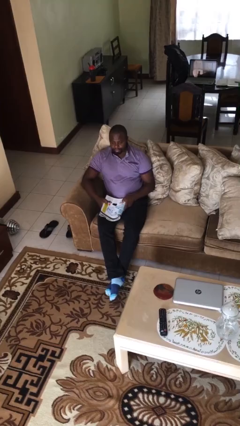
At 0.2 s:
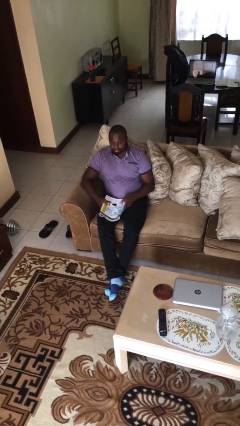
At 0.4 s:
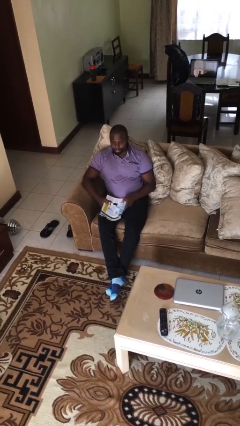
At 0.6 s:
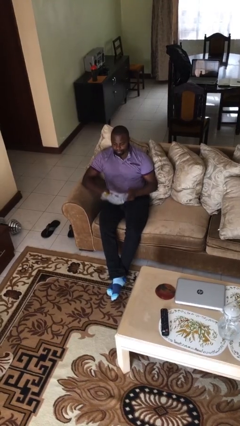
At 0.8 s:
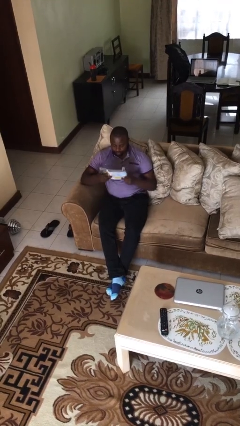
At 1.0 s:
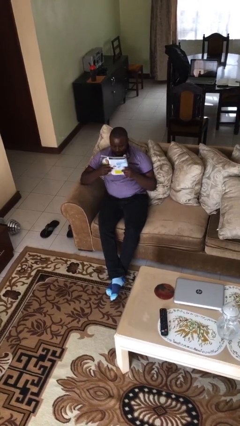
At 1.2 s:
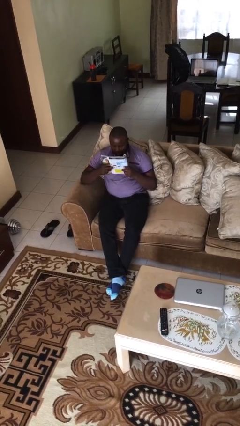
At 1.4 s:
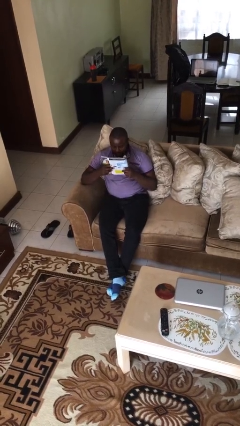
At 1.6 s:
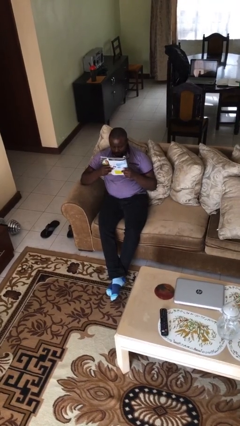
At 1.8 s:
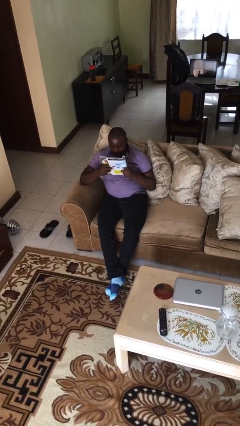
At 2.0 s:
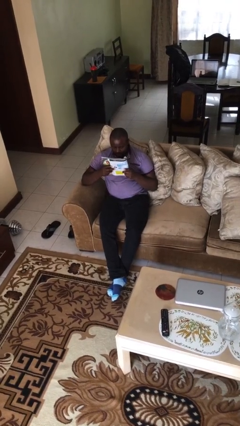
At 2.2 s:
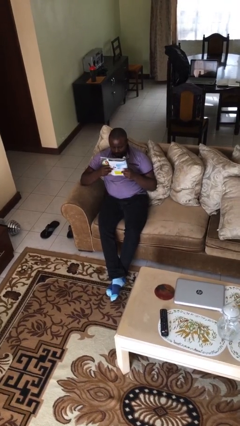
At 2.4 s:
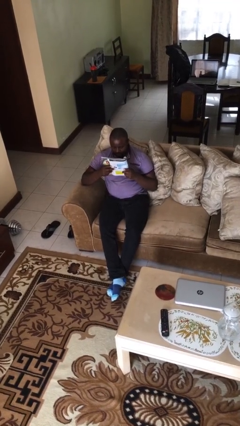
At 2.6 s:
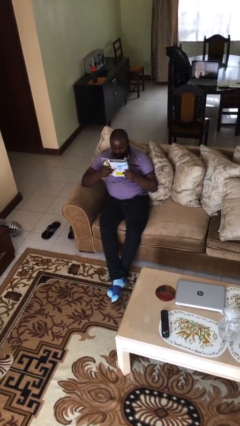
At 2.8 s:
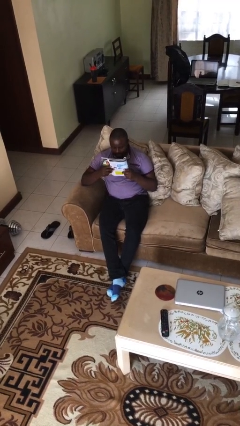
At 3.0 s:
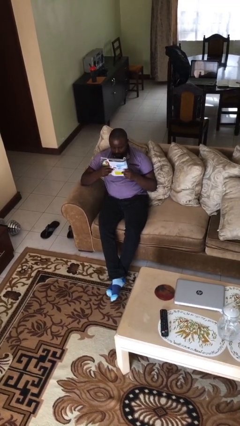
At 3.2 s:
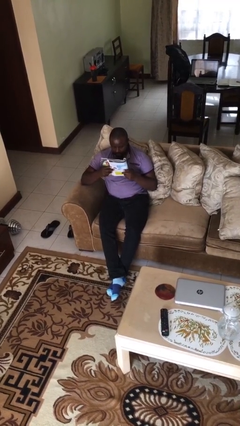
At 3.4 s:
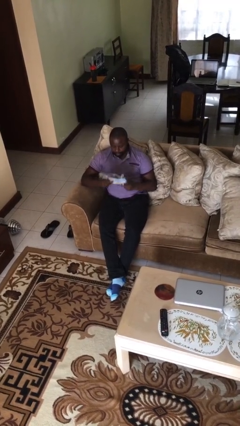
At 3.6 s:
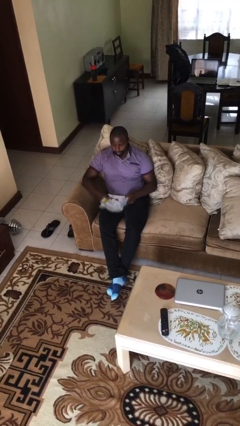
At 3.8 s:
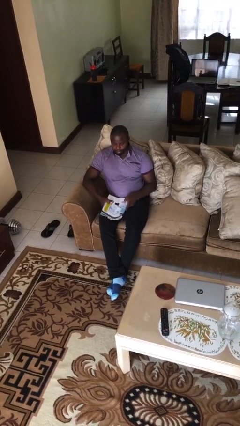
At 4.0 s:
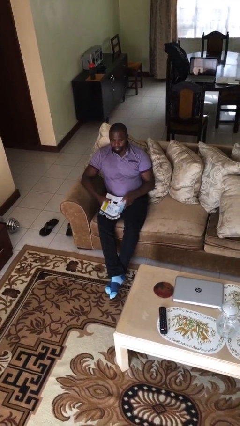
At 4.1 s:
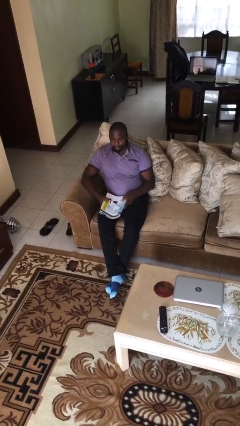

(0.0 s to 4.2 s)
person reads document

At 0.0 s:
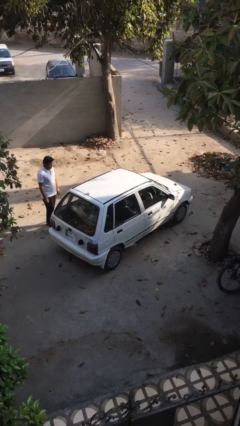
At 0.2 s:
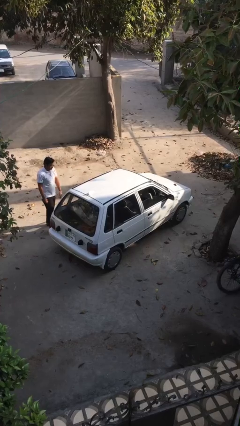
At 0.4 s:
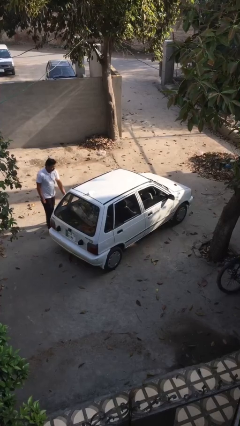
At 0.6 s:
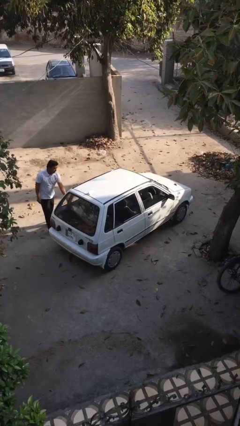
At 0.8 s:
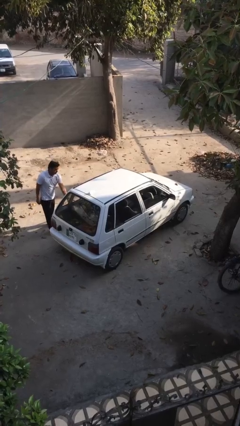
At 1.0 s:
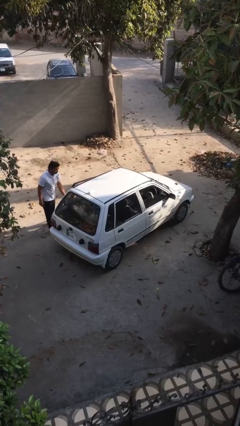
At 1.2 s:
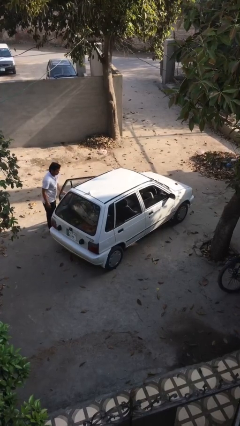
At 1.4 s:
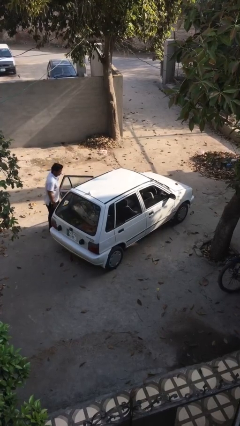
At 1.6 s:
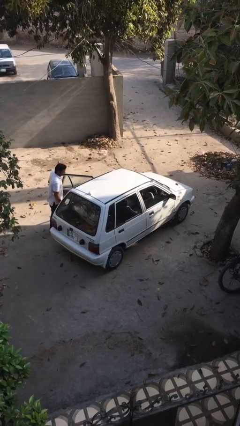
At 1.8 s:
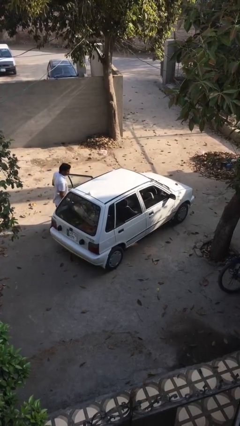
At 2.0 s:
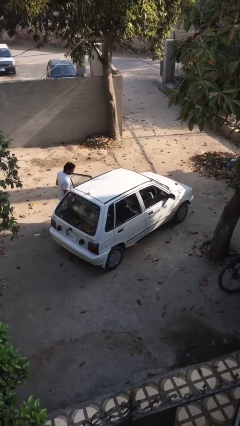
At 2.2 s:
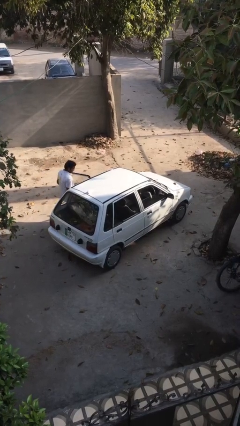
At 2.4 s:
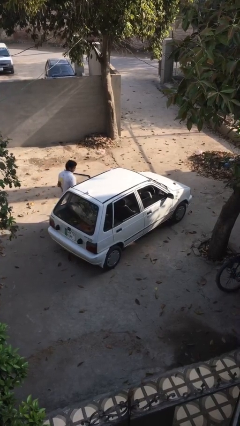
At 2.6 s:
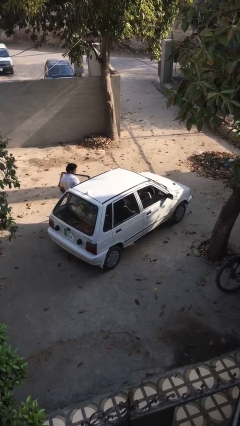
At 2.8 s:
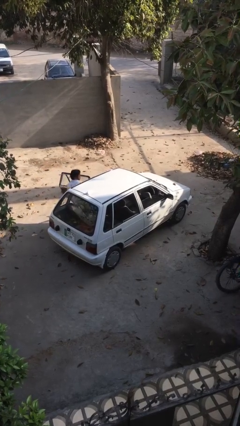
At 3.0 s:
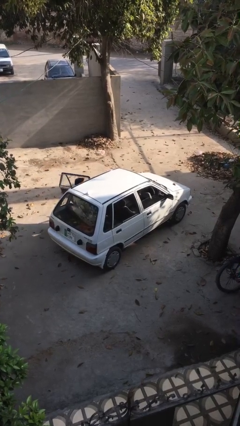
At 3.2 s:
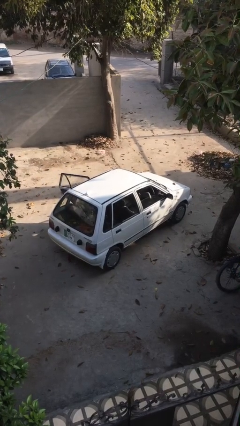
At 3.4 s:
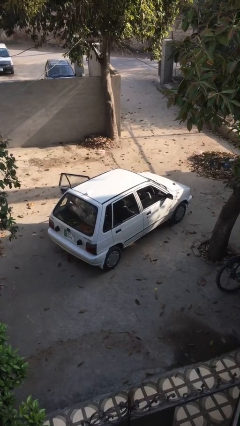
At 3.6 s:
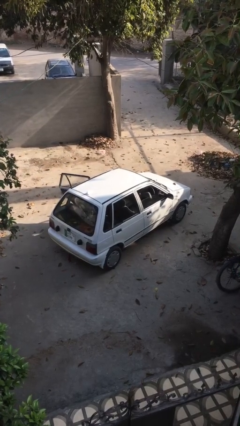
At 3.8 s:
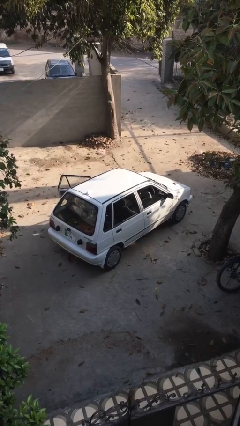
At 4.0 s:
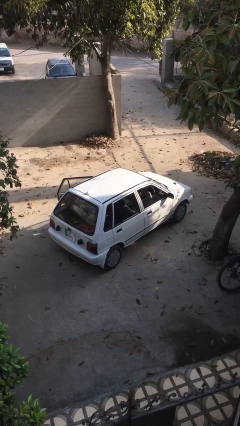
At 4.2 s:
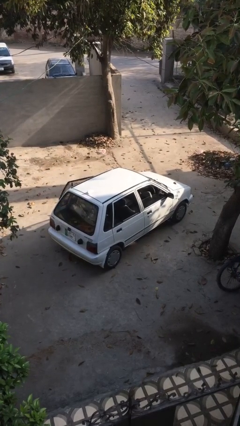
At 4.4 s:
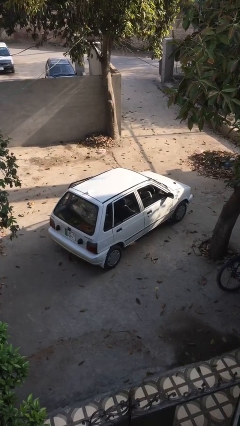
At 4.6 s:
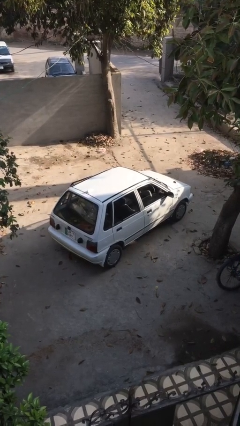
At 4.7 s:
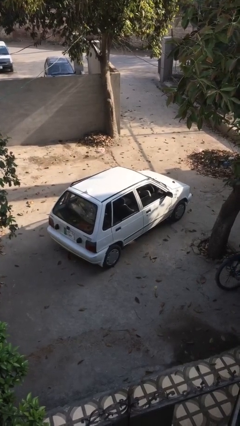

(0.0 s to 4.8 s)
car picks up person

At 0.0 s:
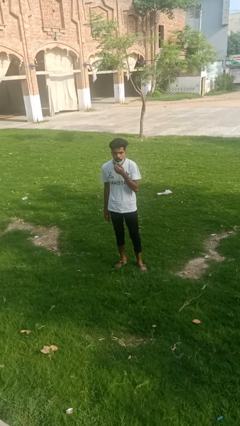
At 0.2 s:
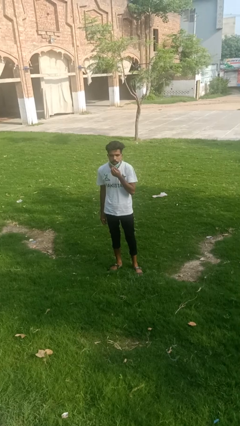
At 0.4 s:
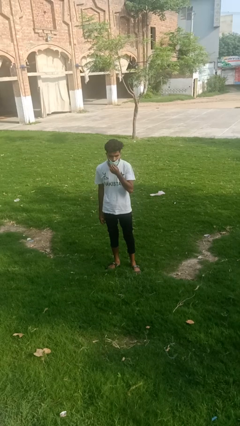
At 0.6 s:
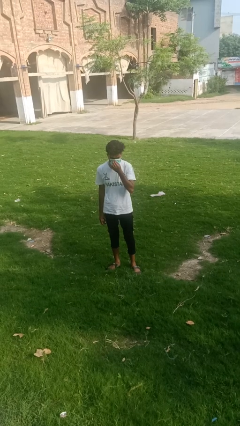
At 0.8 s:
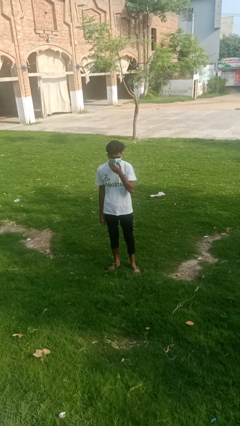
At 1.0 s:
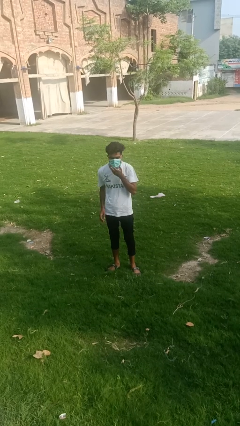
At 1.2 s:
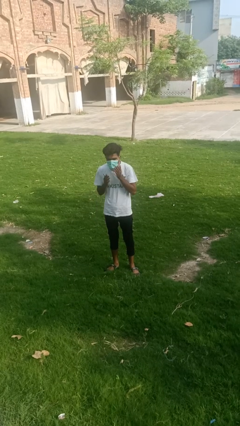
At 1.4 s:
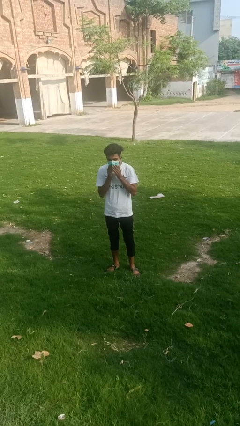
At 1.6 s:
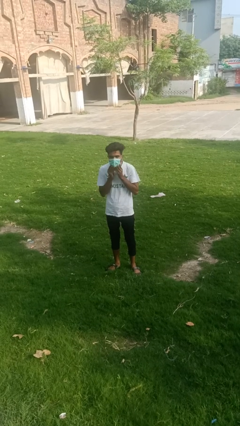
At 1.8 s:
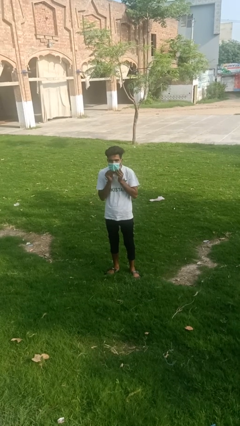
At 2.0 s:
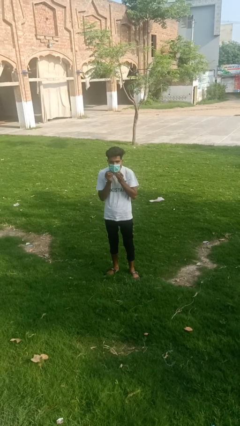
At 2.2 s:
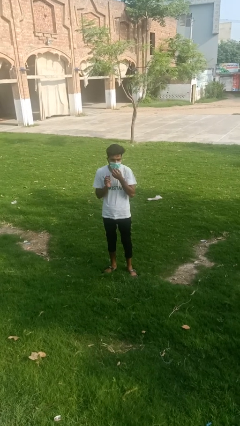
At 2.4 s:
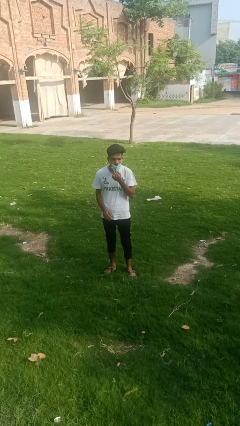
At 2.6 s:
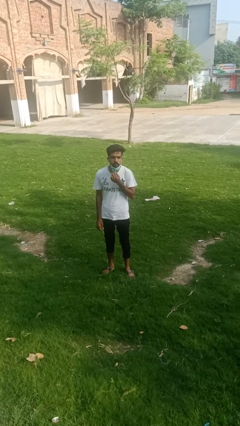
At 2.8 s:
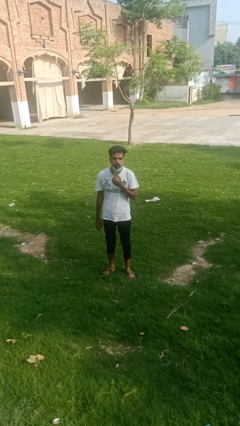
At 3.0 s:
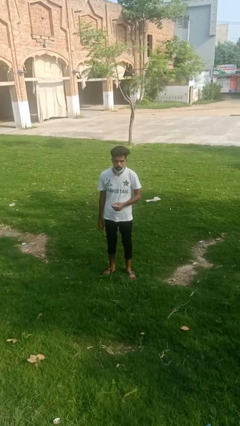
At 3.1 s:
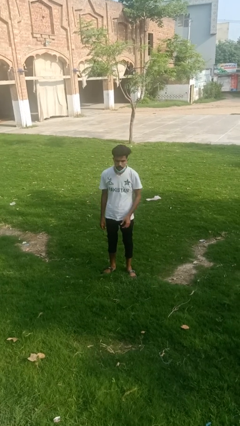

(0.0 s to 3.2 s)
person puts on facemask

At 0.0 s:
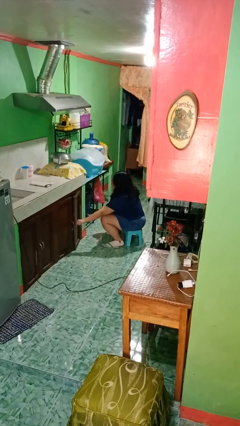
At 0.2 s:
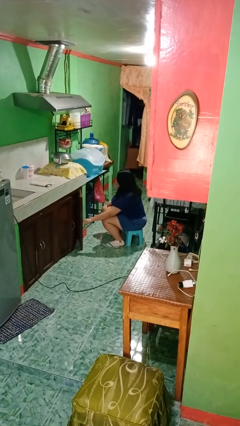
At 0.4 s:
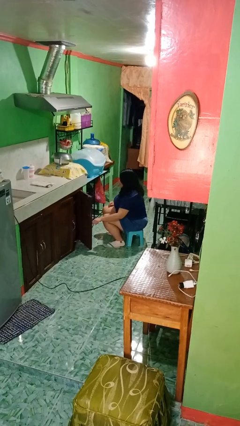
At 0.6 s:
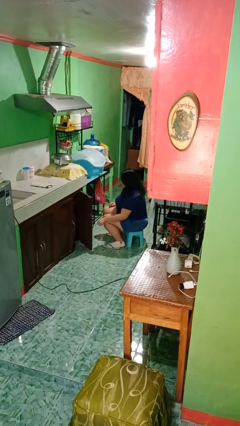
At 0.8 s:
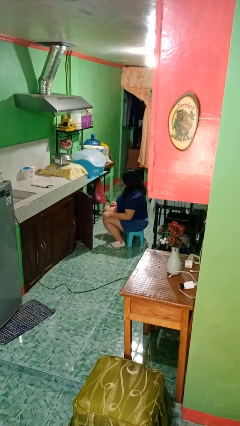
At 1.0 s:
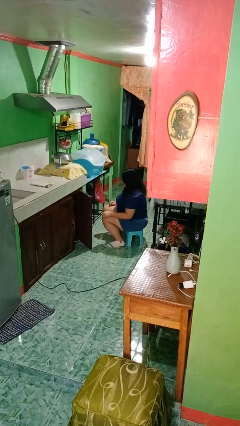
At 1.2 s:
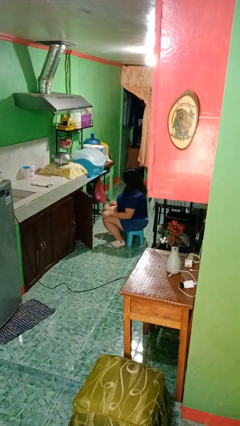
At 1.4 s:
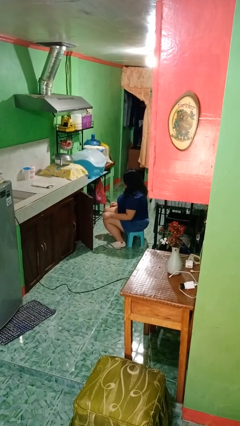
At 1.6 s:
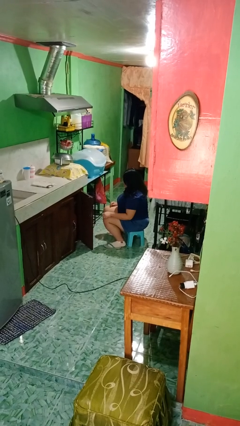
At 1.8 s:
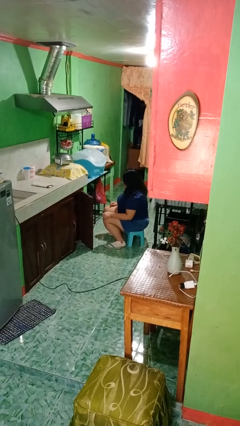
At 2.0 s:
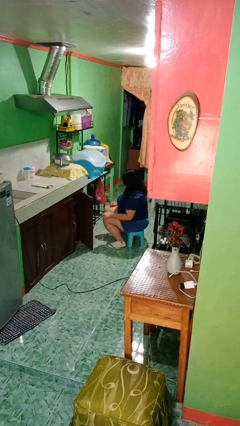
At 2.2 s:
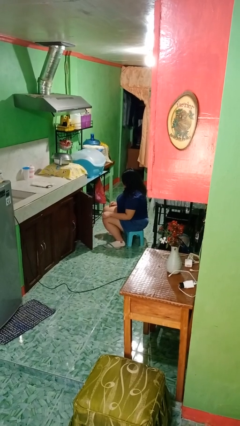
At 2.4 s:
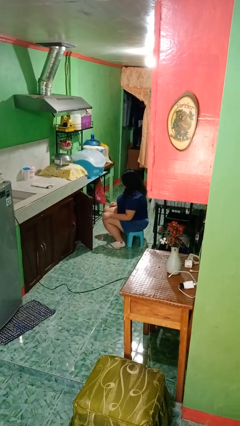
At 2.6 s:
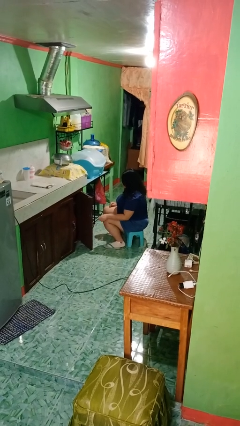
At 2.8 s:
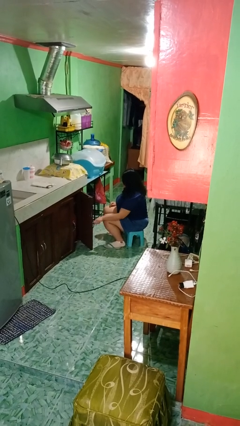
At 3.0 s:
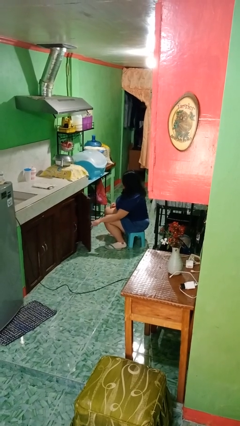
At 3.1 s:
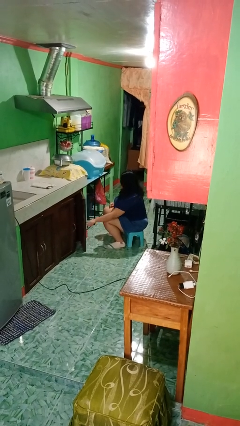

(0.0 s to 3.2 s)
person opens cabinet

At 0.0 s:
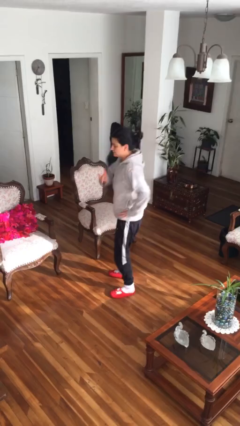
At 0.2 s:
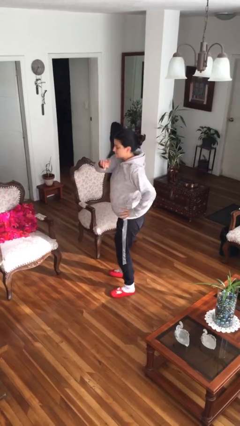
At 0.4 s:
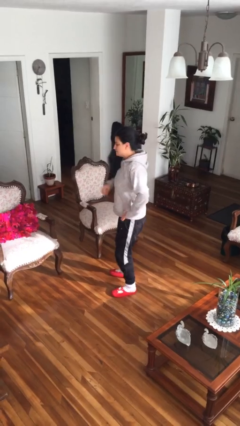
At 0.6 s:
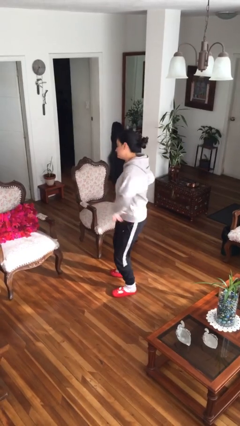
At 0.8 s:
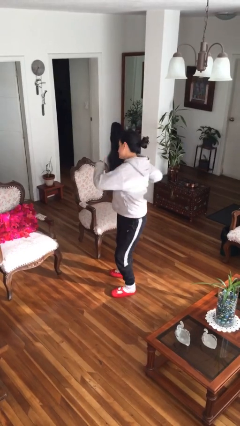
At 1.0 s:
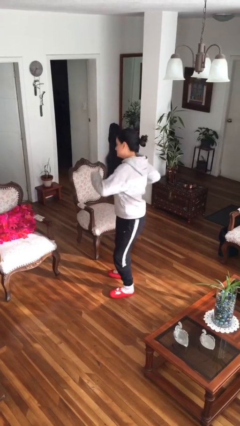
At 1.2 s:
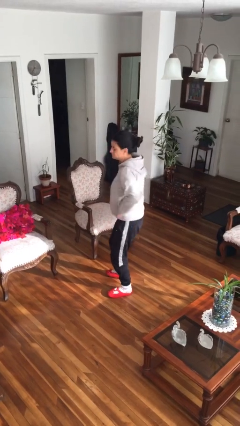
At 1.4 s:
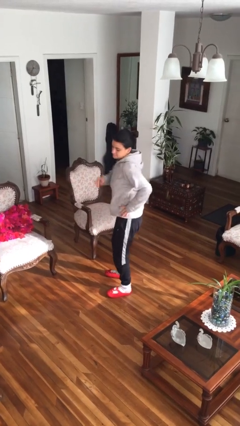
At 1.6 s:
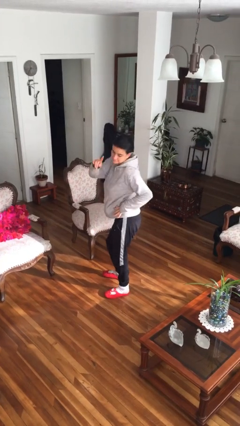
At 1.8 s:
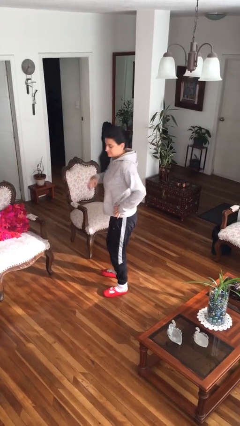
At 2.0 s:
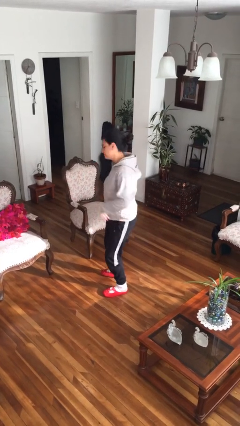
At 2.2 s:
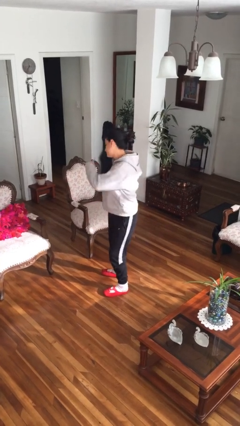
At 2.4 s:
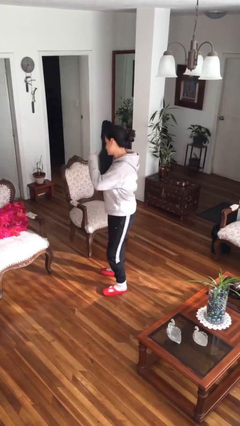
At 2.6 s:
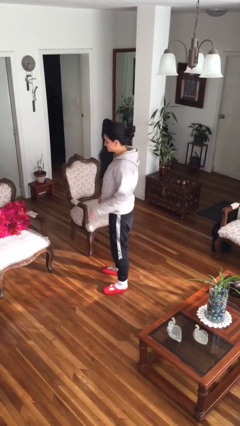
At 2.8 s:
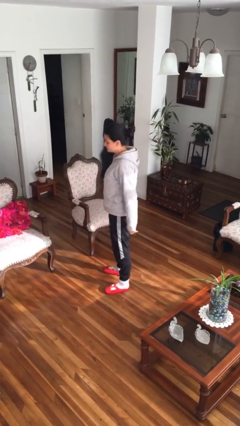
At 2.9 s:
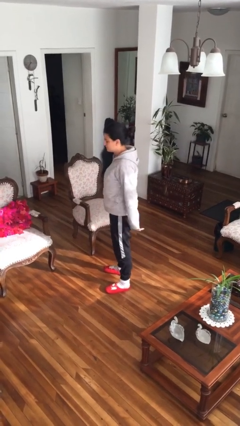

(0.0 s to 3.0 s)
person dances in place
